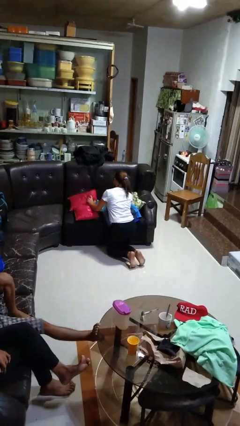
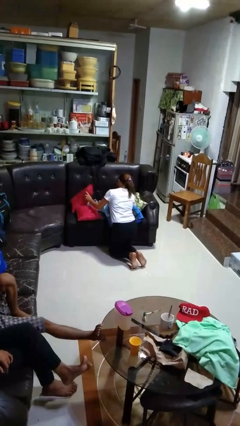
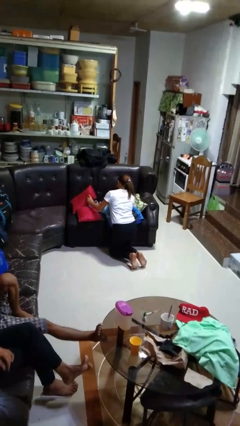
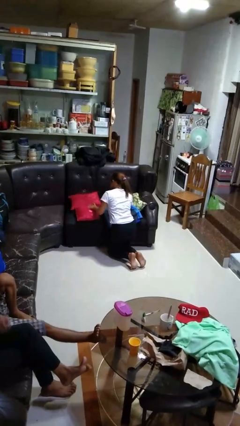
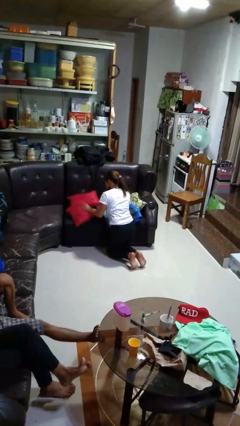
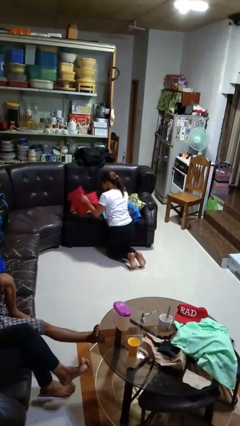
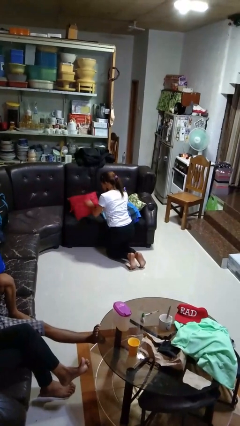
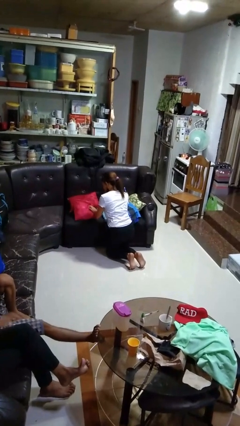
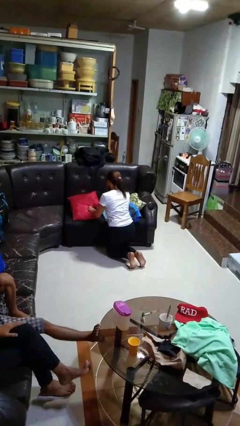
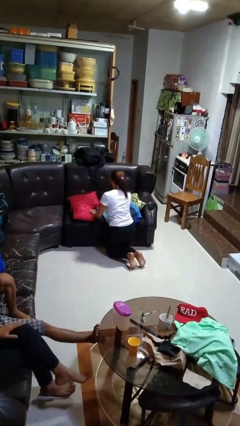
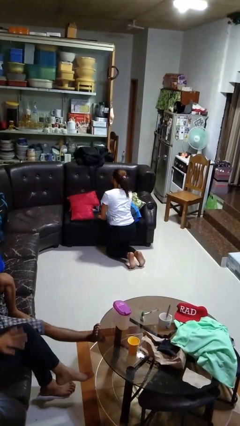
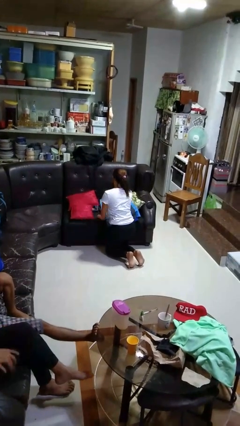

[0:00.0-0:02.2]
person searches in couch

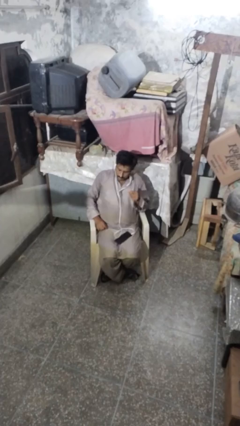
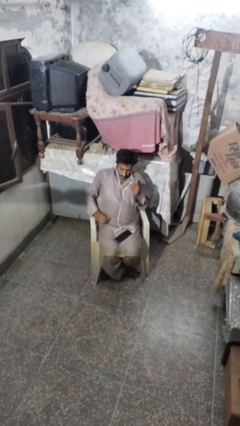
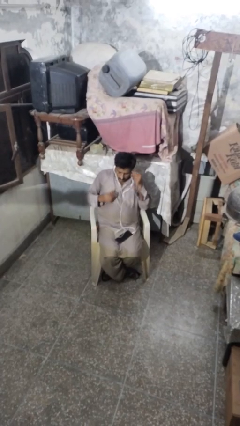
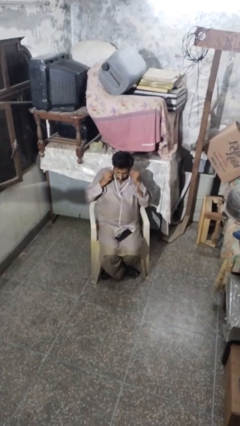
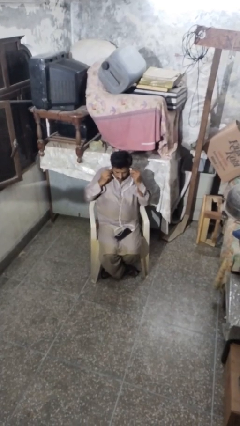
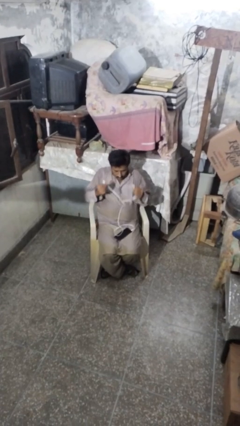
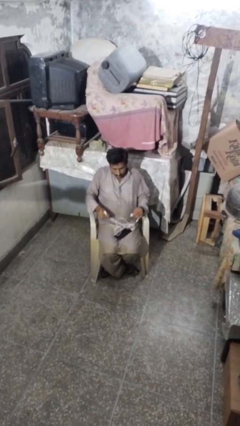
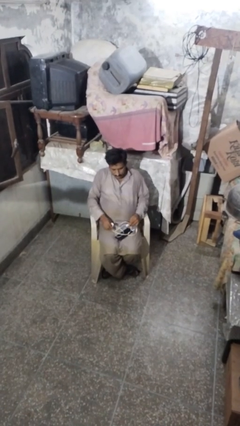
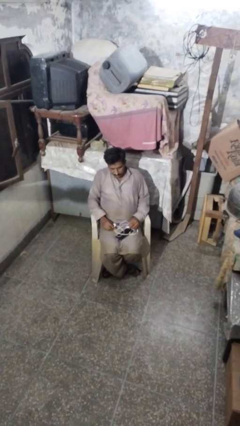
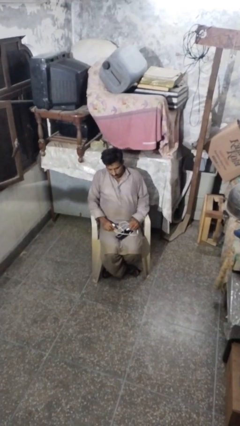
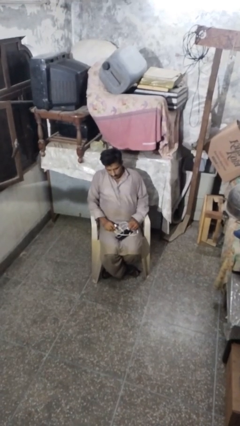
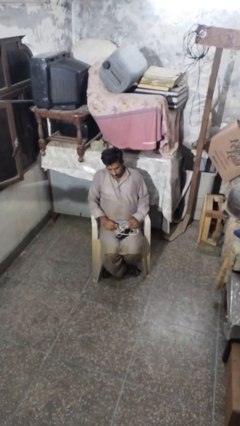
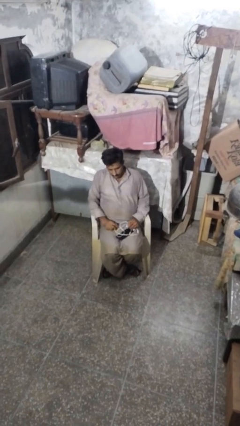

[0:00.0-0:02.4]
person takes off headphones

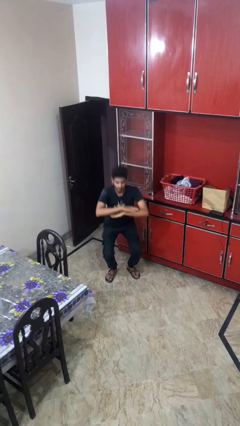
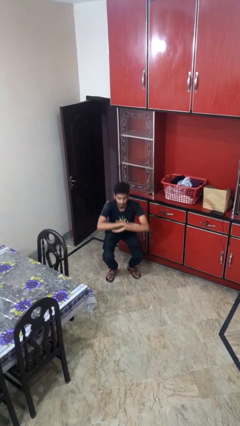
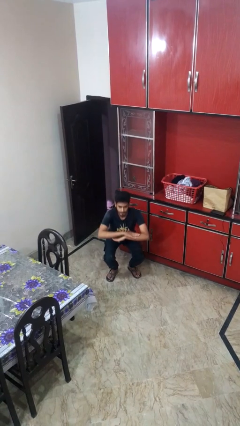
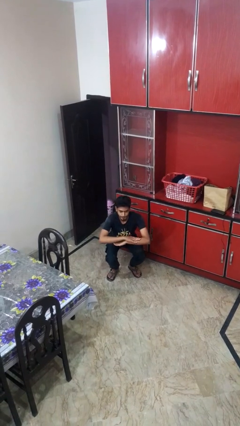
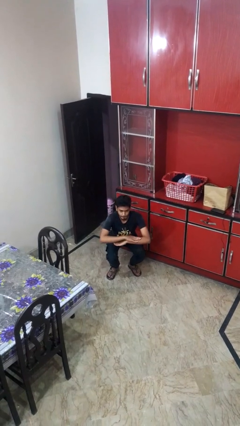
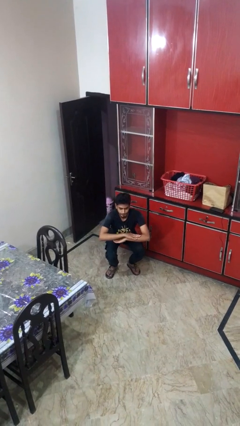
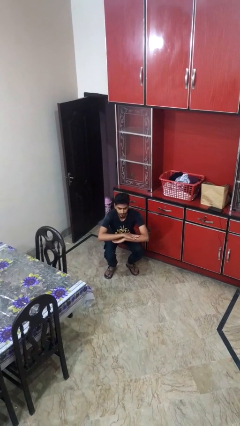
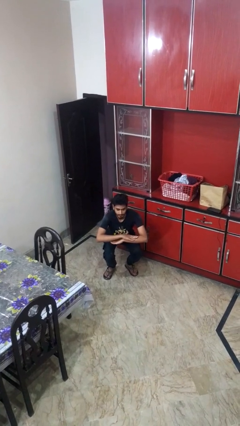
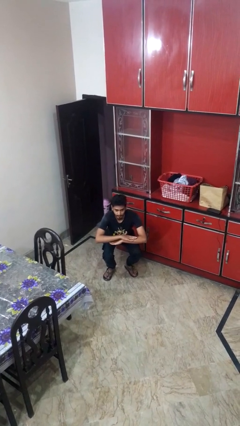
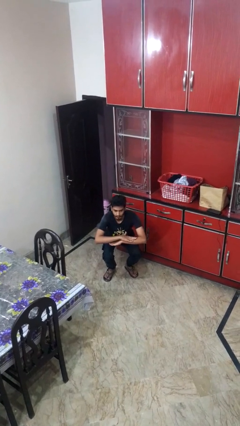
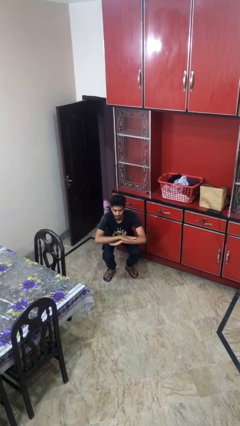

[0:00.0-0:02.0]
person squats

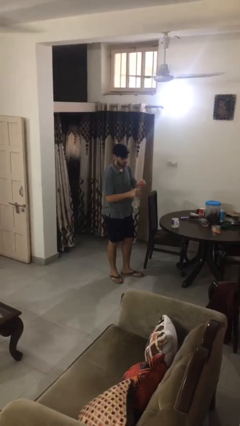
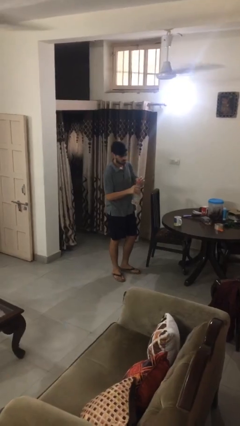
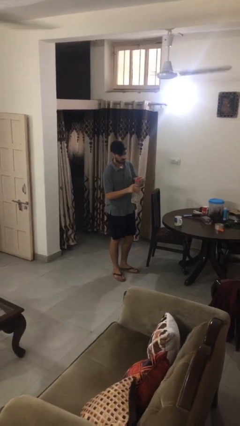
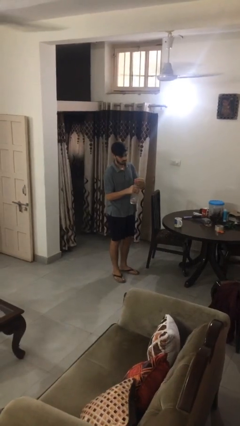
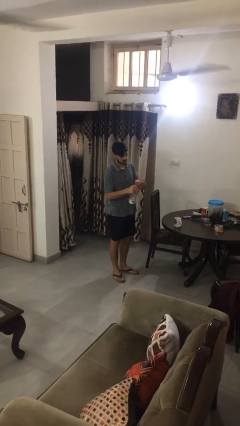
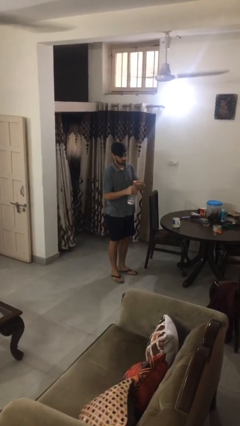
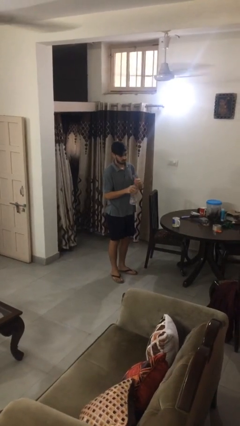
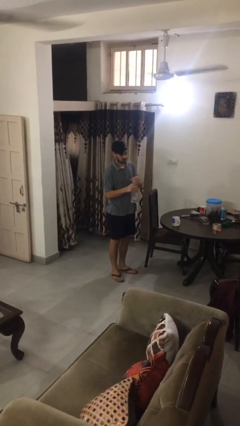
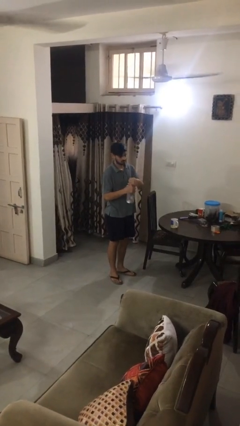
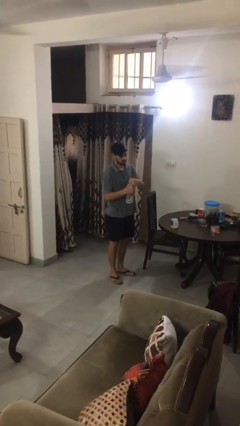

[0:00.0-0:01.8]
person screws lid to bottle

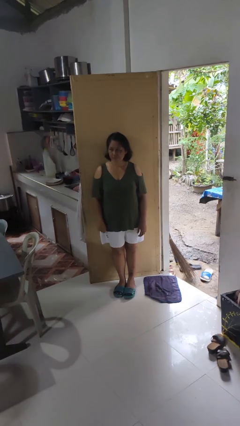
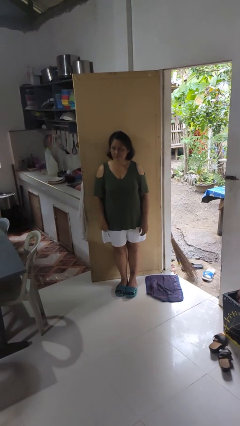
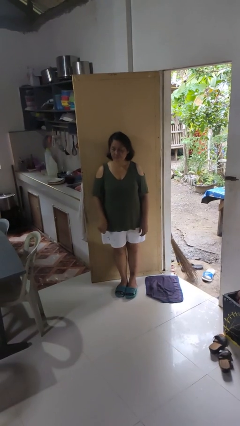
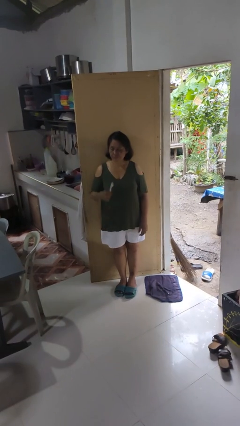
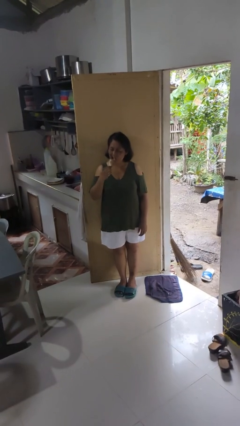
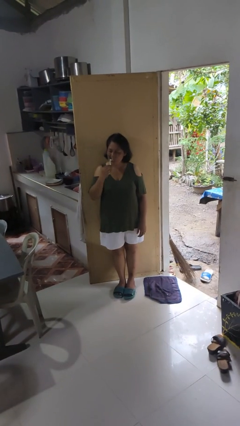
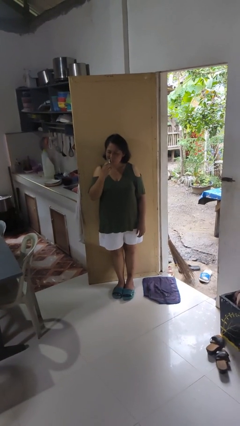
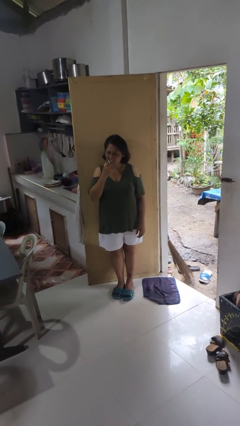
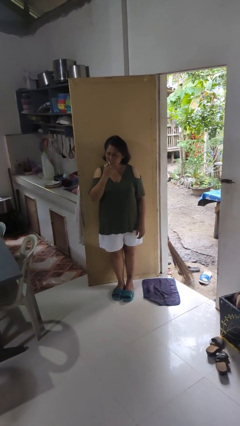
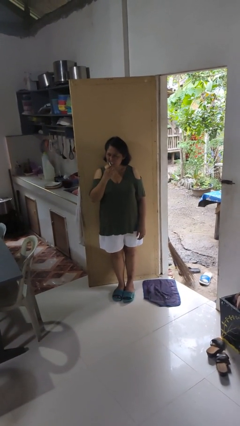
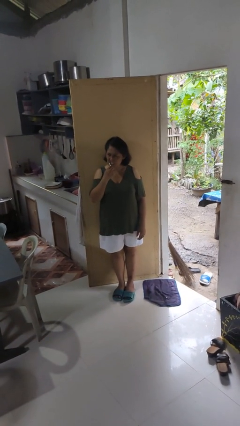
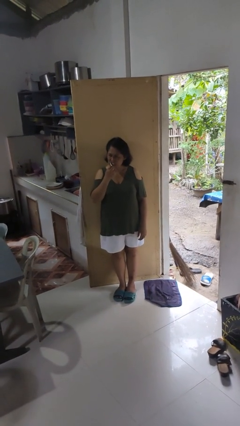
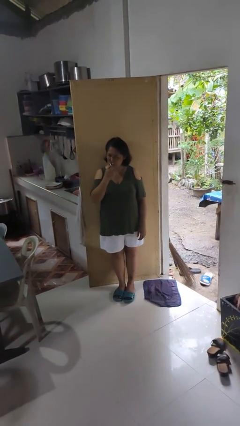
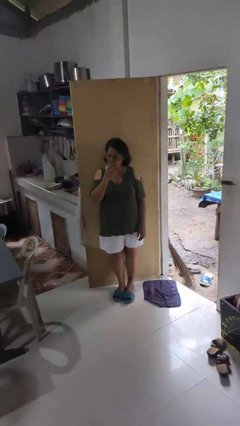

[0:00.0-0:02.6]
person brushes teeth

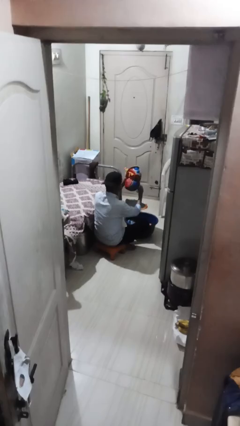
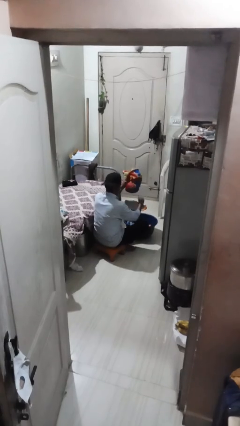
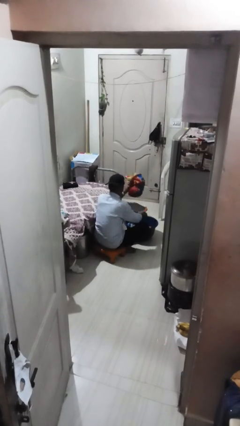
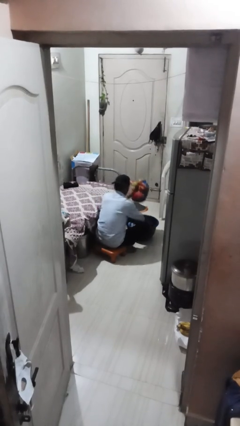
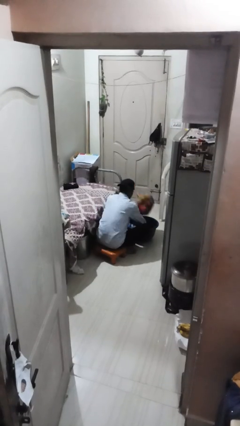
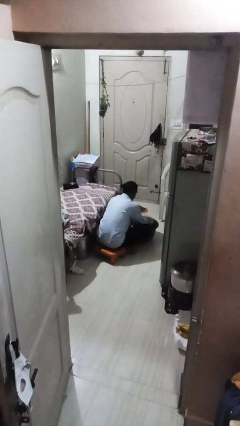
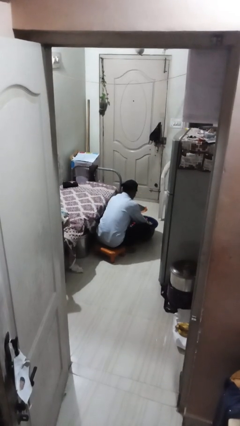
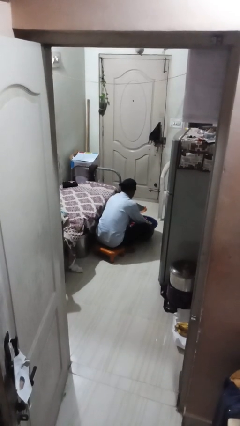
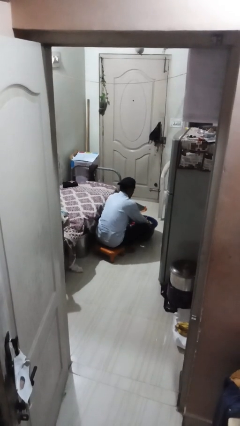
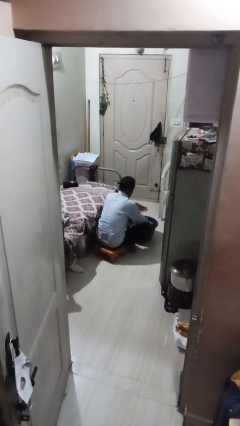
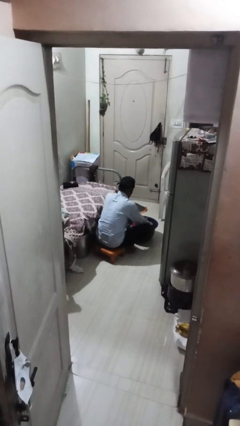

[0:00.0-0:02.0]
person puts object into basket

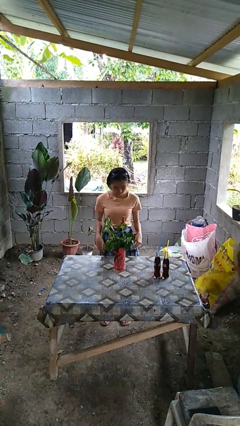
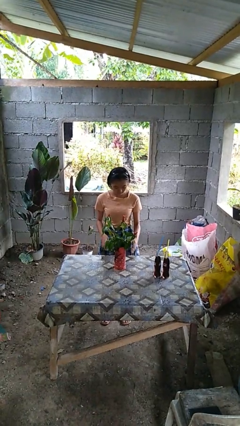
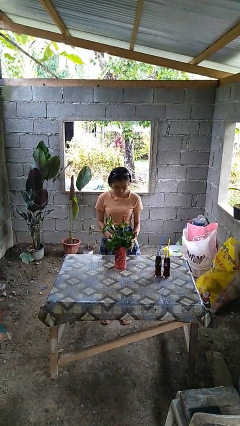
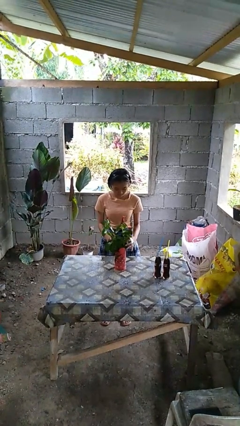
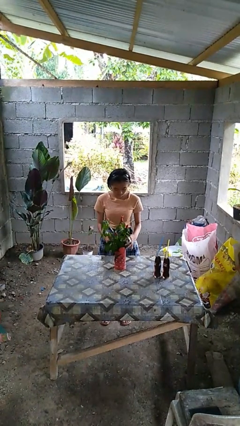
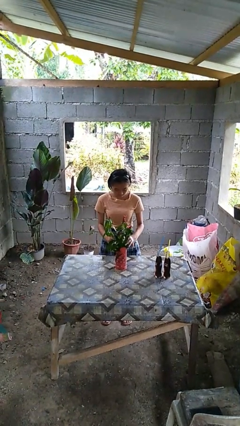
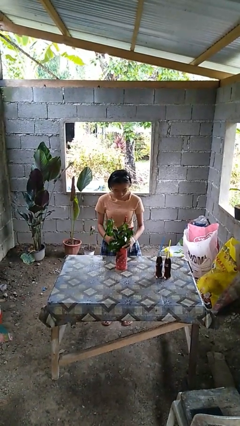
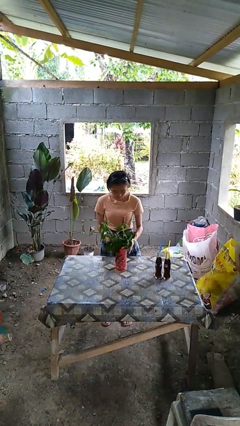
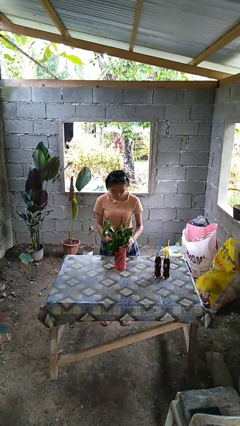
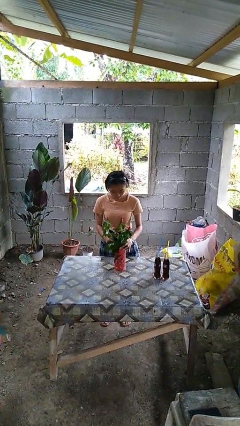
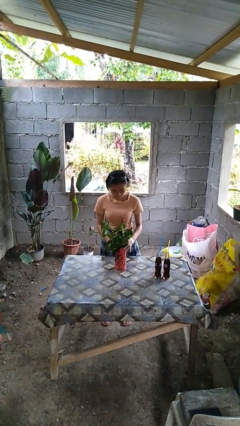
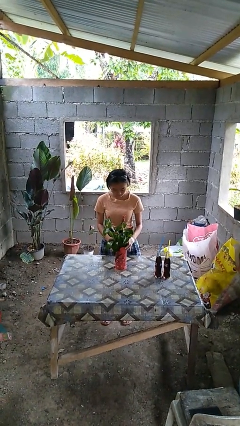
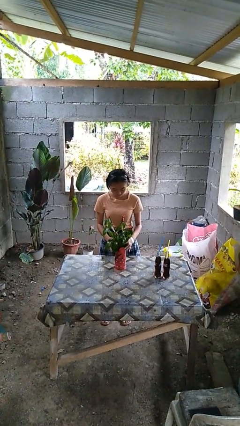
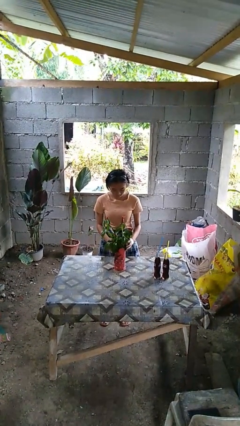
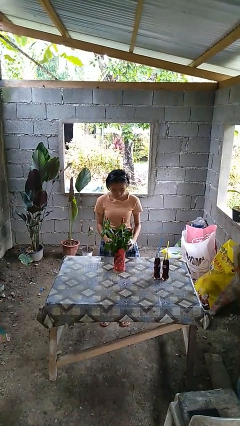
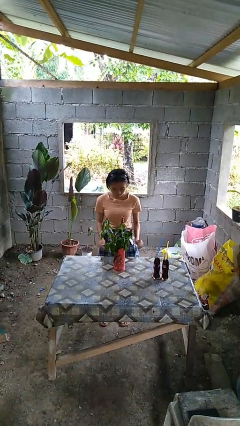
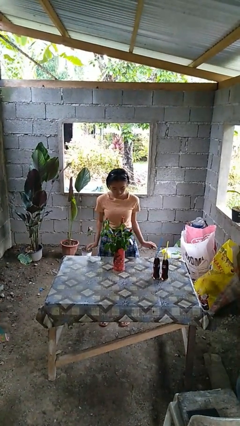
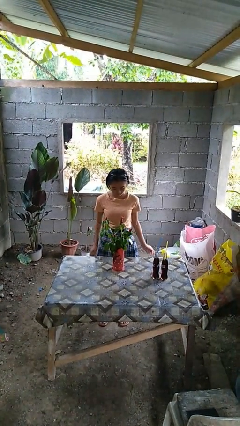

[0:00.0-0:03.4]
person arranges flowers in vase

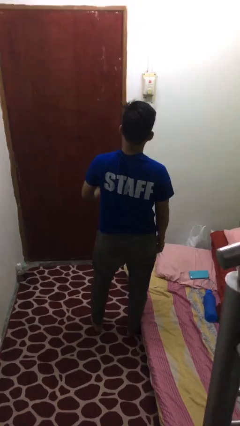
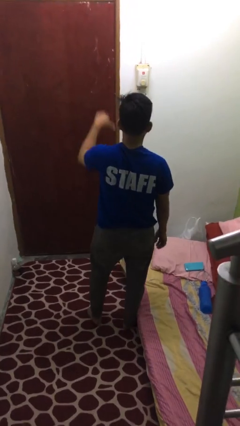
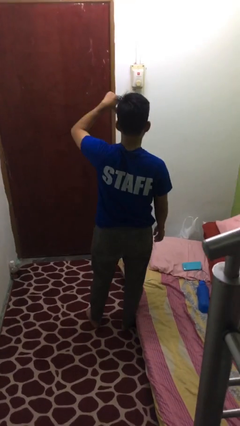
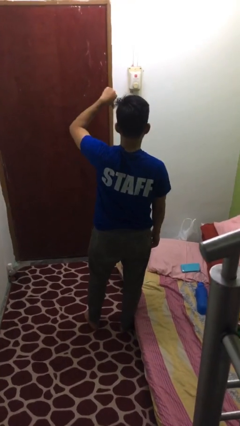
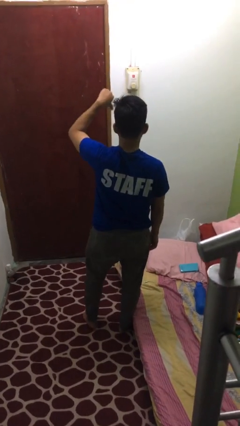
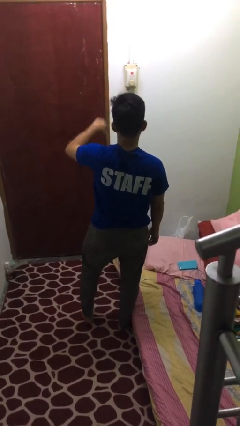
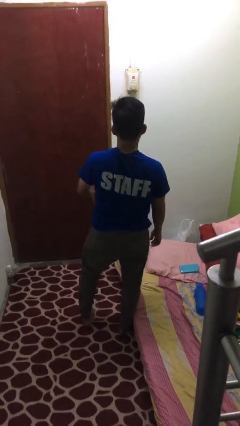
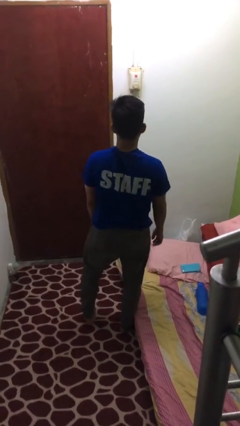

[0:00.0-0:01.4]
person gestures thumbs down
